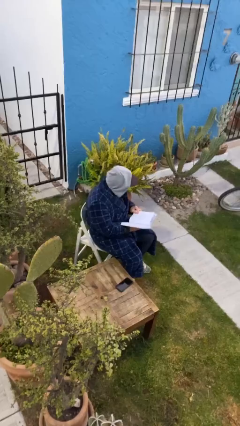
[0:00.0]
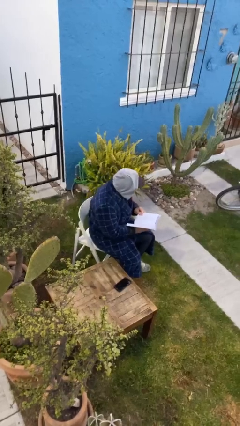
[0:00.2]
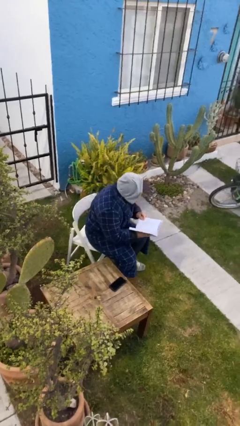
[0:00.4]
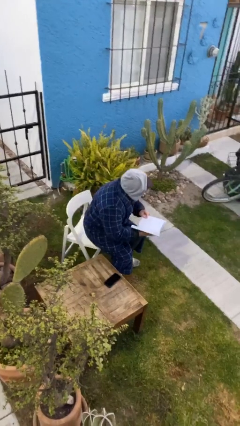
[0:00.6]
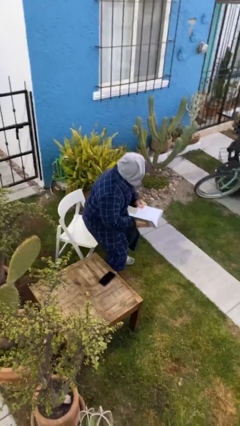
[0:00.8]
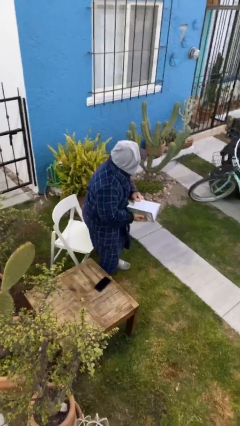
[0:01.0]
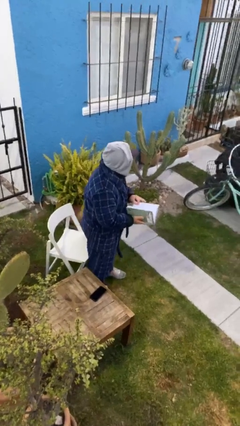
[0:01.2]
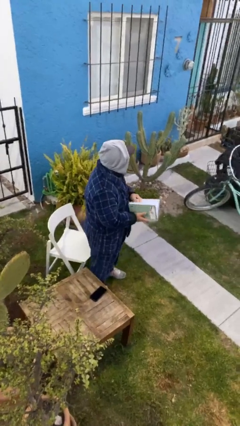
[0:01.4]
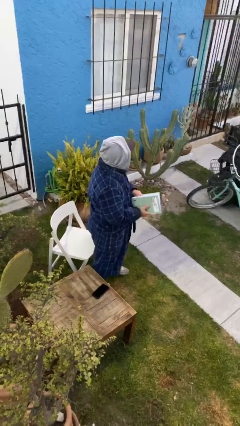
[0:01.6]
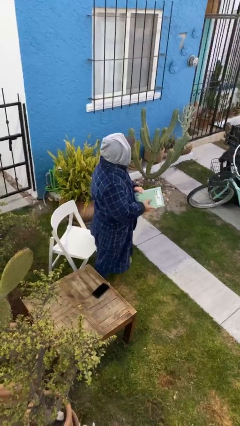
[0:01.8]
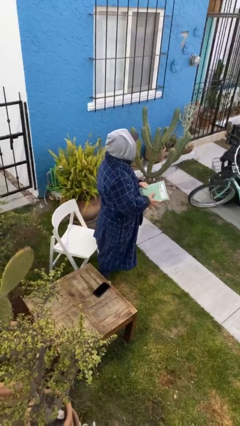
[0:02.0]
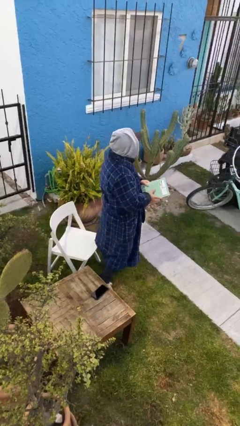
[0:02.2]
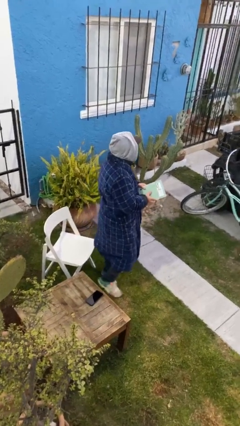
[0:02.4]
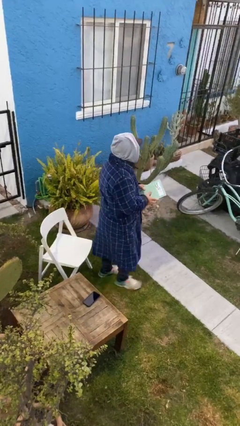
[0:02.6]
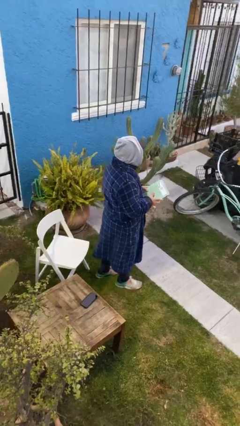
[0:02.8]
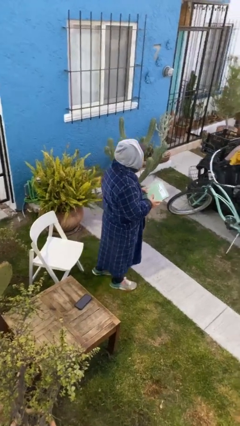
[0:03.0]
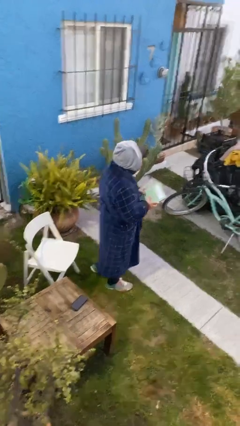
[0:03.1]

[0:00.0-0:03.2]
person stands up

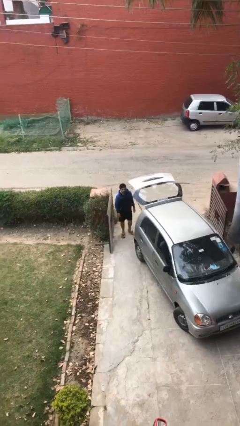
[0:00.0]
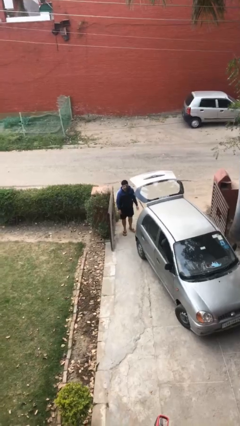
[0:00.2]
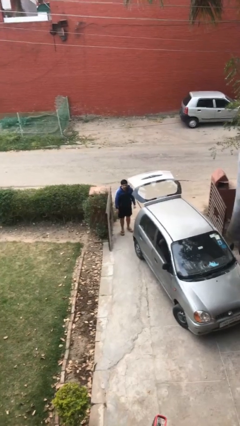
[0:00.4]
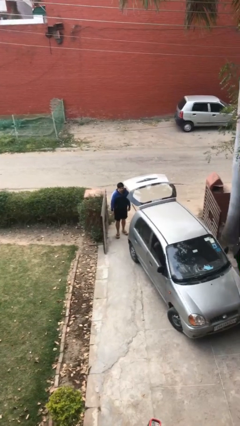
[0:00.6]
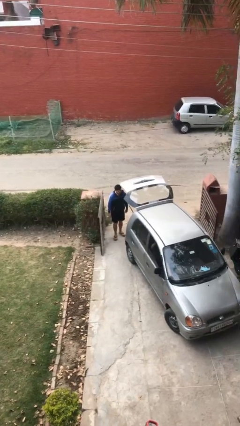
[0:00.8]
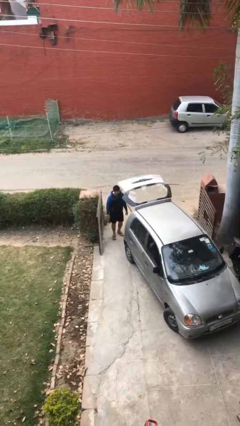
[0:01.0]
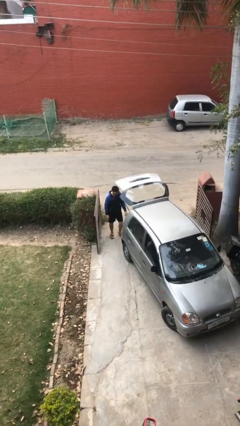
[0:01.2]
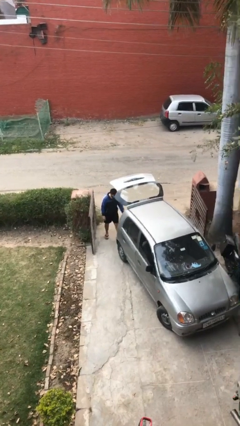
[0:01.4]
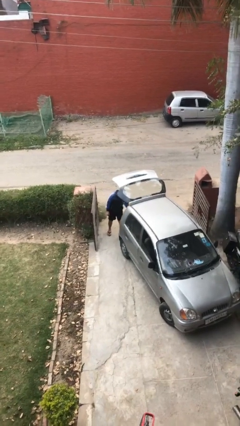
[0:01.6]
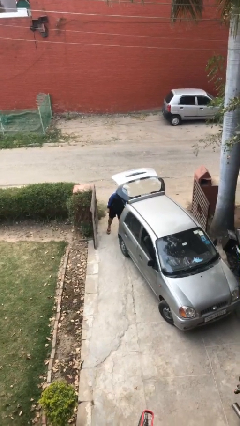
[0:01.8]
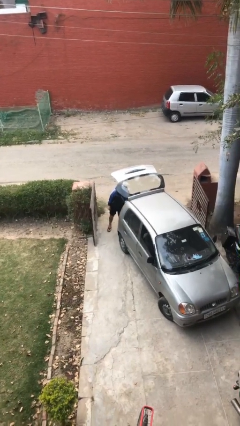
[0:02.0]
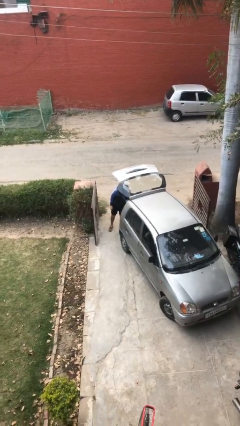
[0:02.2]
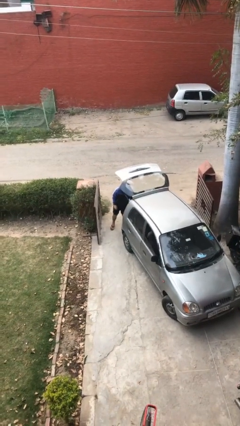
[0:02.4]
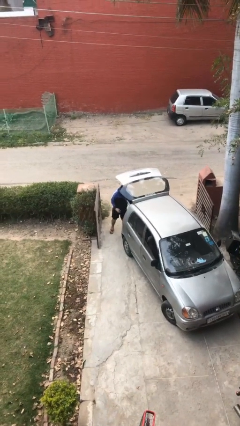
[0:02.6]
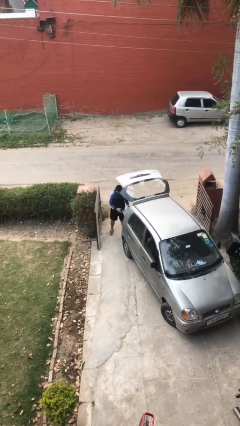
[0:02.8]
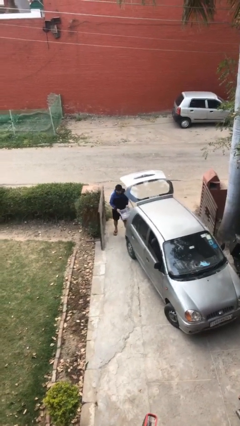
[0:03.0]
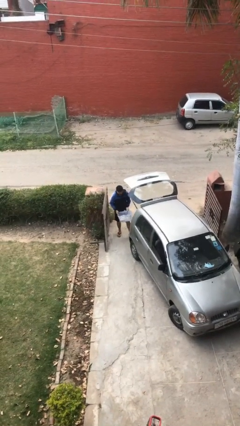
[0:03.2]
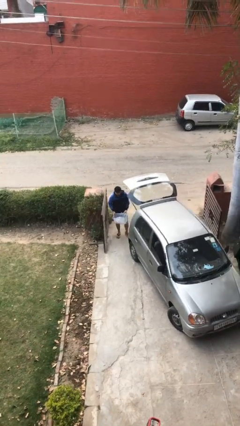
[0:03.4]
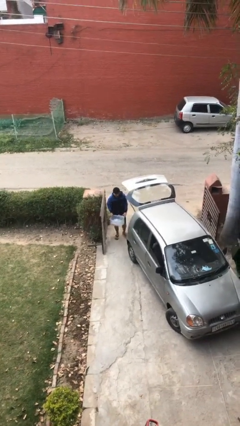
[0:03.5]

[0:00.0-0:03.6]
person unloads car

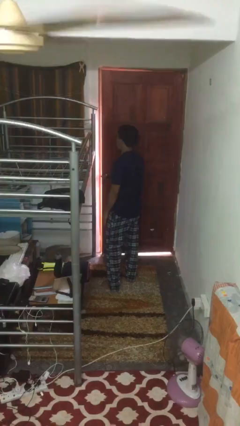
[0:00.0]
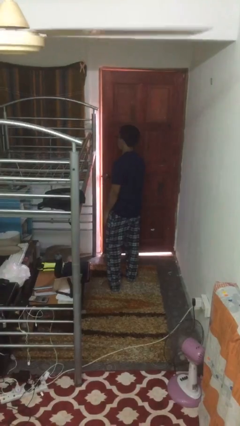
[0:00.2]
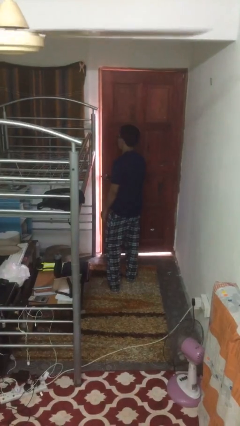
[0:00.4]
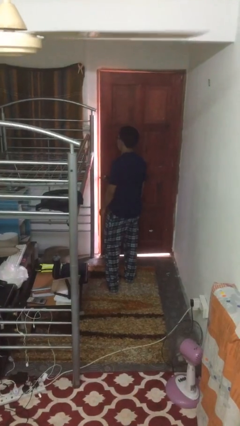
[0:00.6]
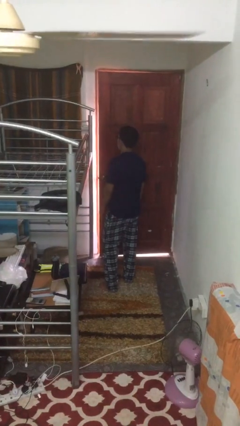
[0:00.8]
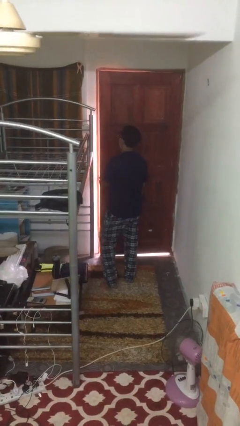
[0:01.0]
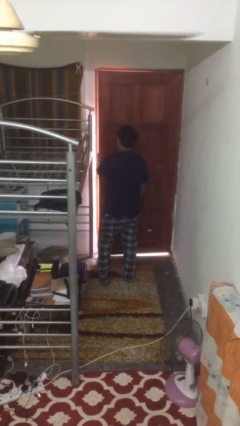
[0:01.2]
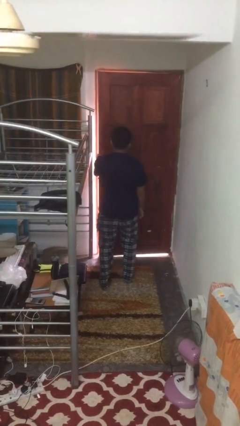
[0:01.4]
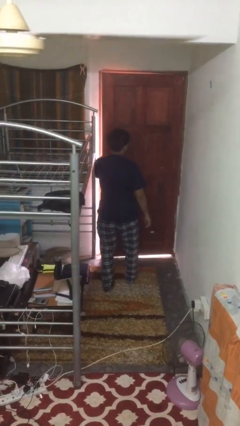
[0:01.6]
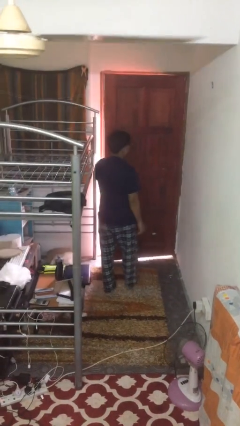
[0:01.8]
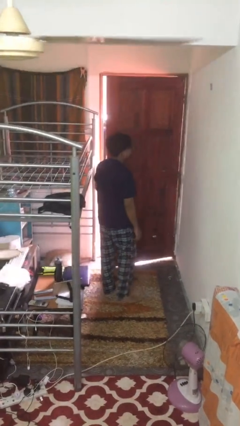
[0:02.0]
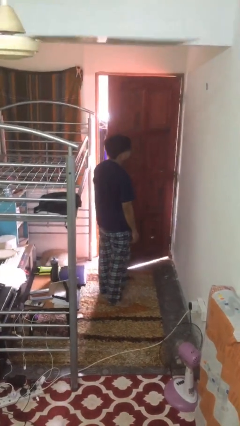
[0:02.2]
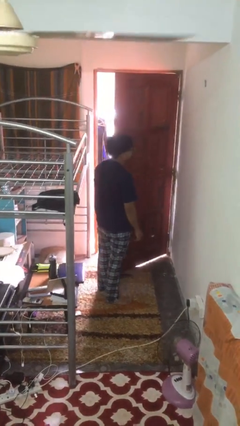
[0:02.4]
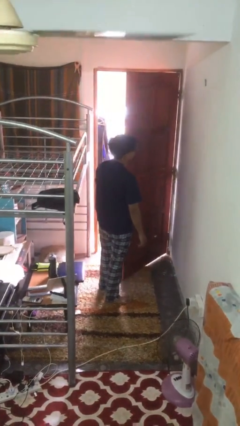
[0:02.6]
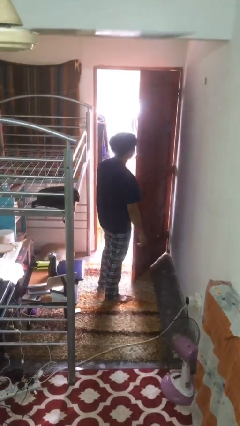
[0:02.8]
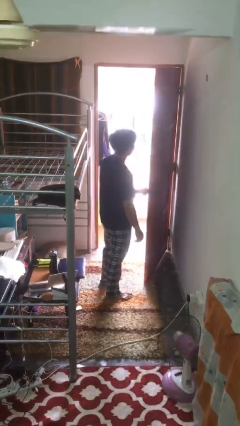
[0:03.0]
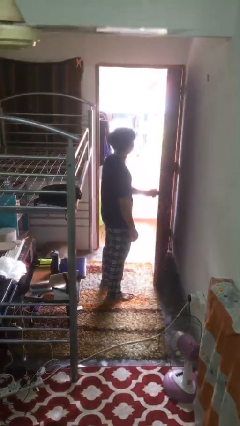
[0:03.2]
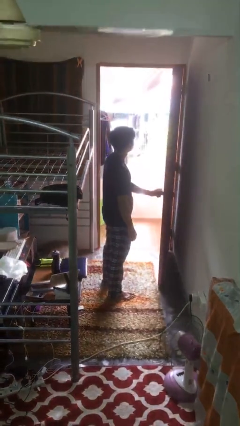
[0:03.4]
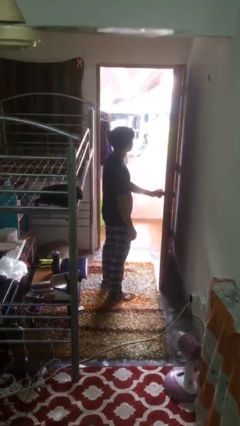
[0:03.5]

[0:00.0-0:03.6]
person opens facility door

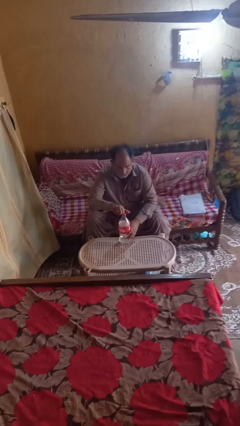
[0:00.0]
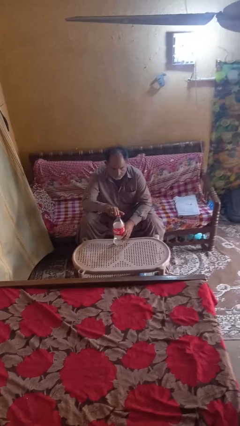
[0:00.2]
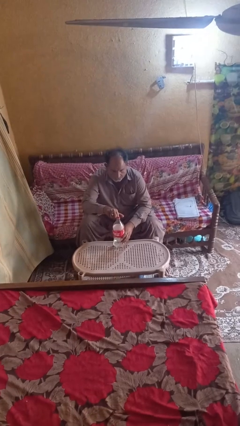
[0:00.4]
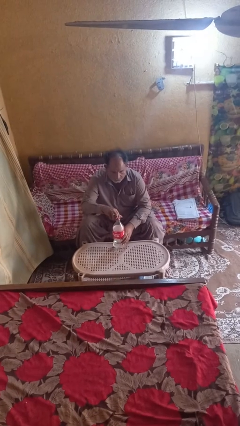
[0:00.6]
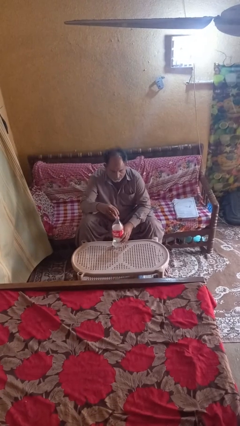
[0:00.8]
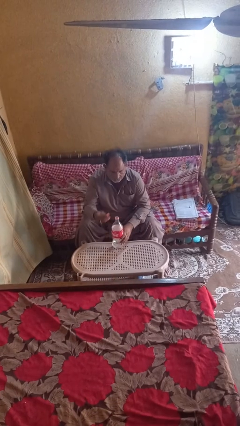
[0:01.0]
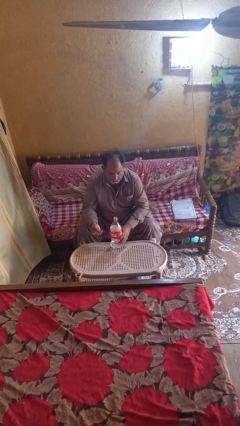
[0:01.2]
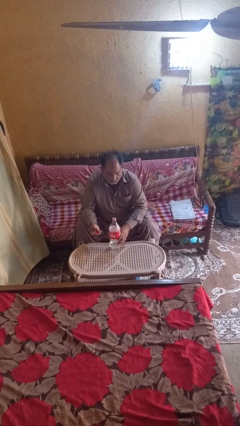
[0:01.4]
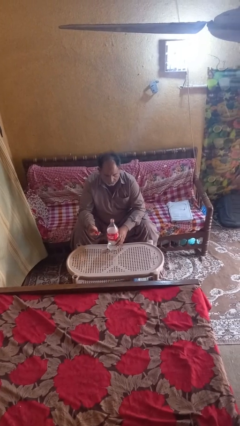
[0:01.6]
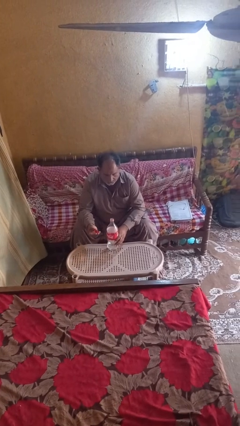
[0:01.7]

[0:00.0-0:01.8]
person unscrews lid from bottle

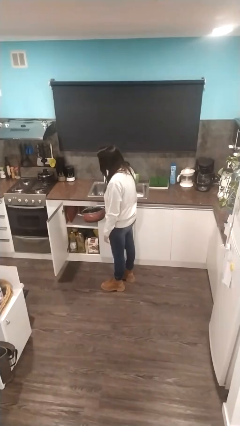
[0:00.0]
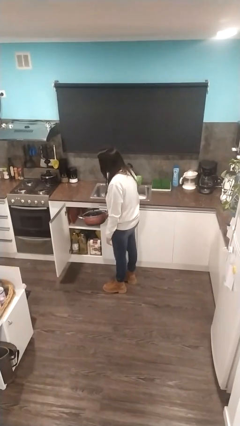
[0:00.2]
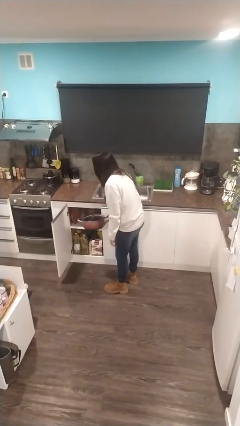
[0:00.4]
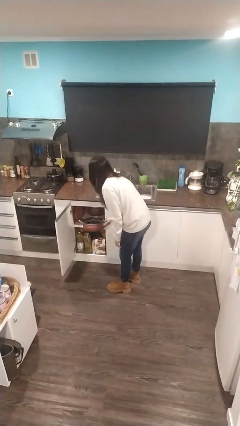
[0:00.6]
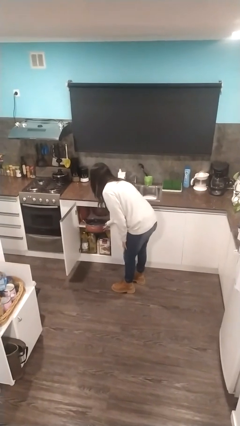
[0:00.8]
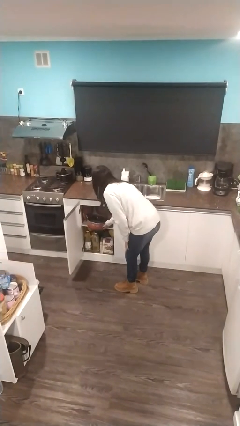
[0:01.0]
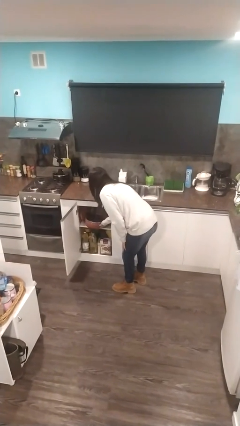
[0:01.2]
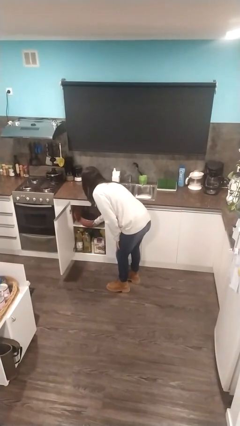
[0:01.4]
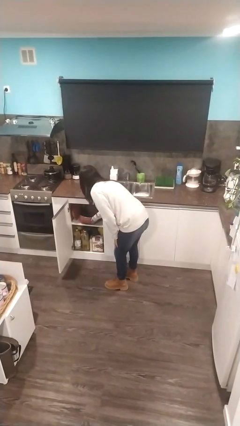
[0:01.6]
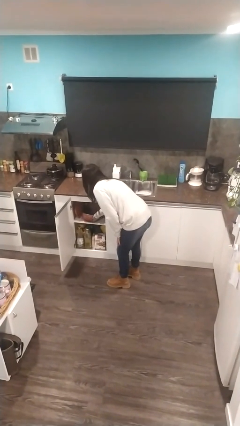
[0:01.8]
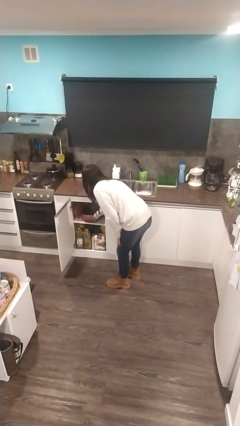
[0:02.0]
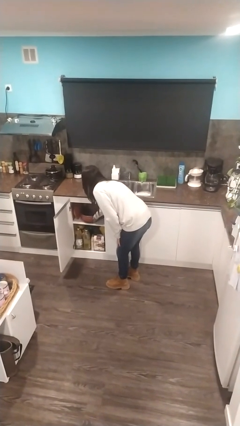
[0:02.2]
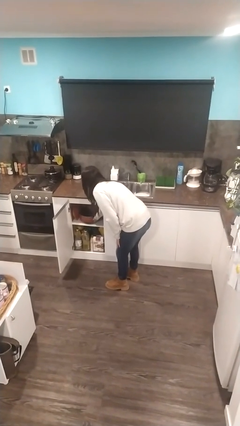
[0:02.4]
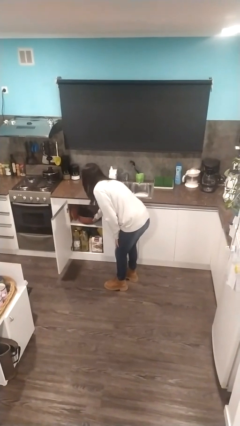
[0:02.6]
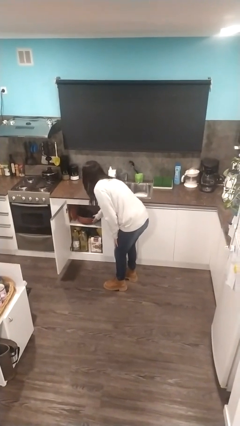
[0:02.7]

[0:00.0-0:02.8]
person puts down object into cabinet

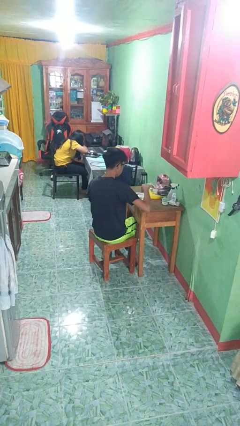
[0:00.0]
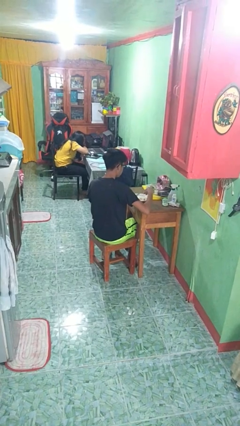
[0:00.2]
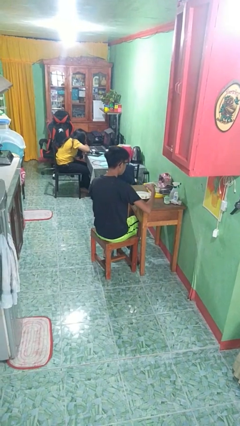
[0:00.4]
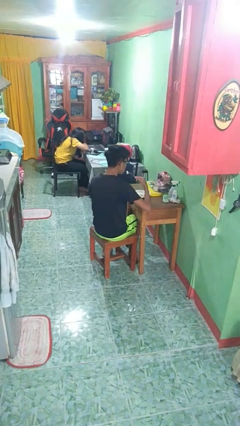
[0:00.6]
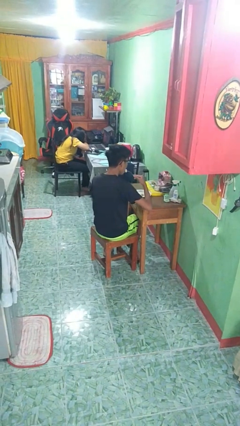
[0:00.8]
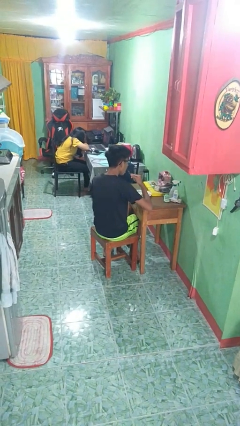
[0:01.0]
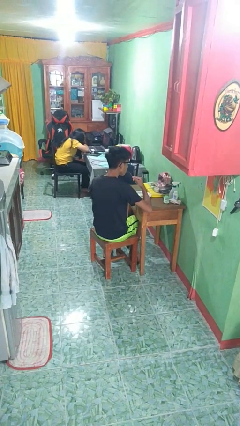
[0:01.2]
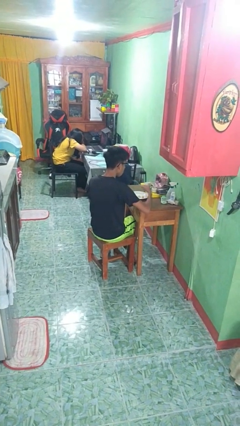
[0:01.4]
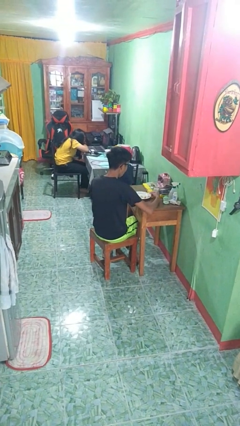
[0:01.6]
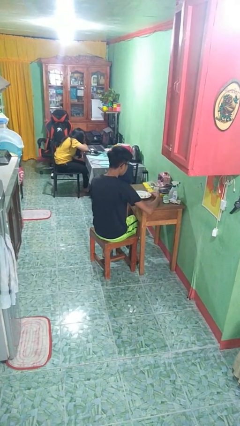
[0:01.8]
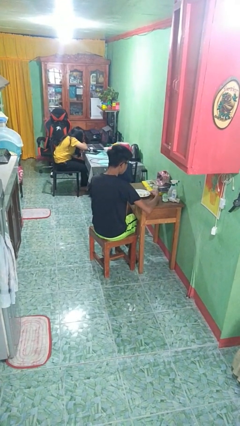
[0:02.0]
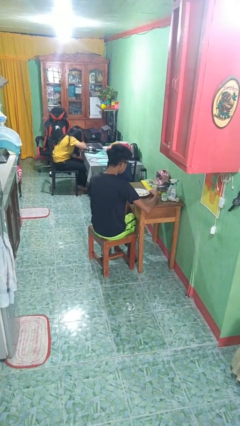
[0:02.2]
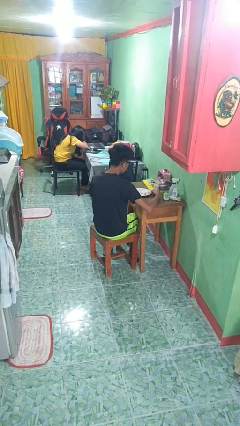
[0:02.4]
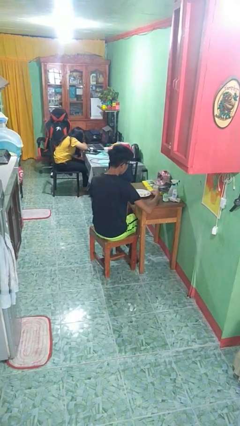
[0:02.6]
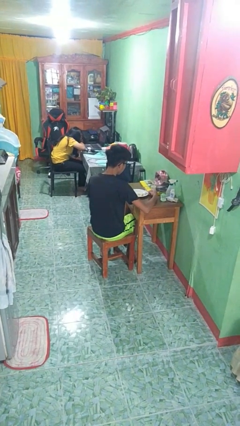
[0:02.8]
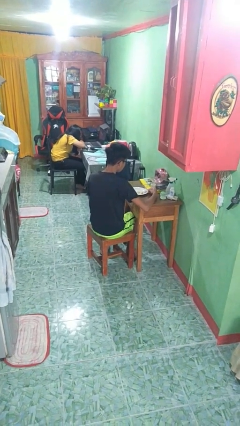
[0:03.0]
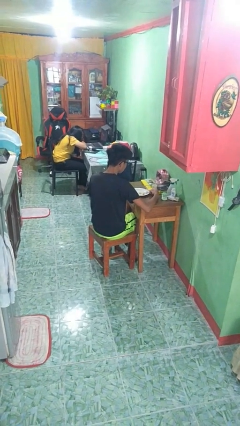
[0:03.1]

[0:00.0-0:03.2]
person eats with utensil
